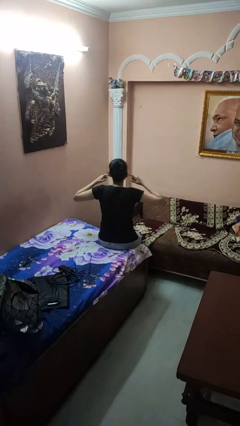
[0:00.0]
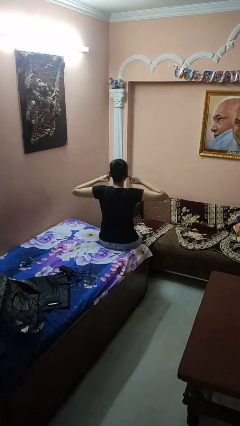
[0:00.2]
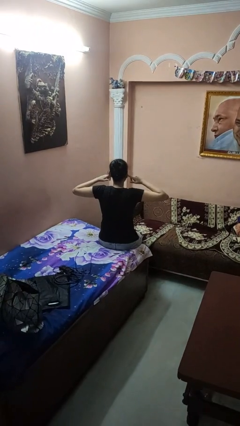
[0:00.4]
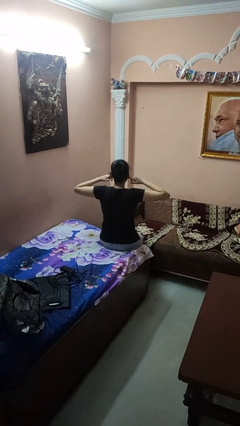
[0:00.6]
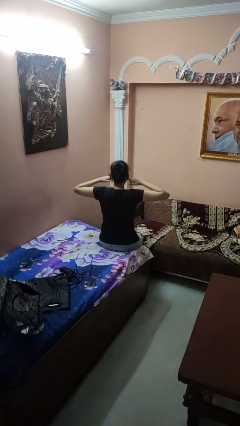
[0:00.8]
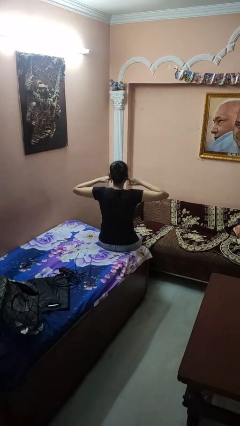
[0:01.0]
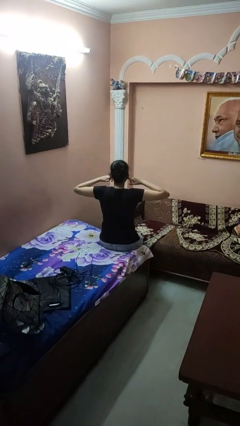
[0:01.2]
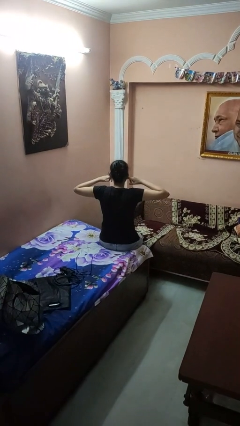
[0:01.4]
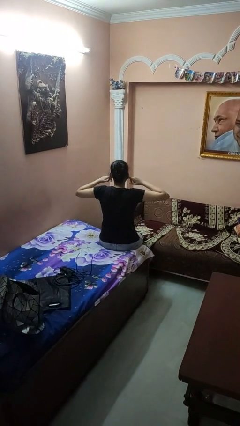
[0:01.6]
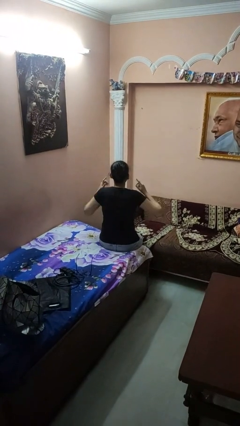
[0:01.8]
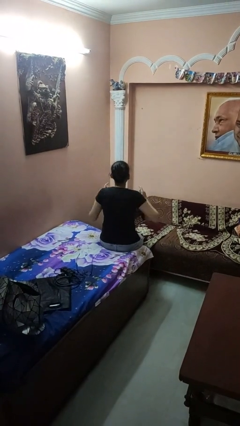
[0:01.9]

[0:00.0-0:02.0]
person puts fingers in ear

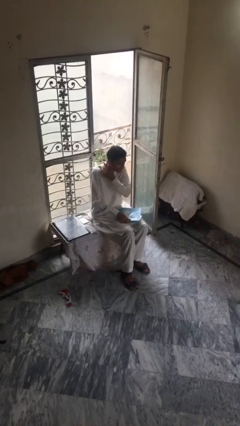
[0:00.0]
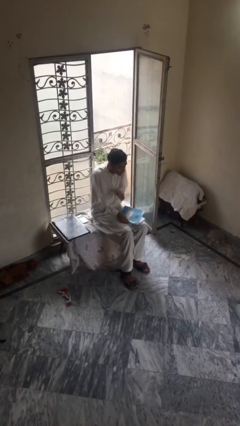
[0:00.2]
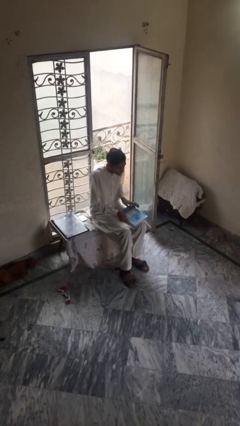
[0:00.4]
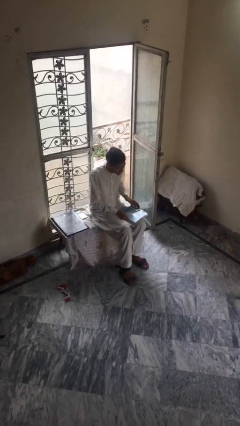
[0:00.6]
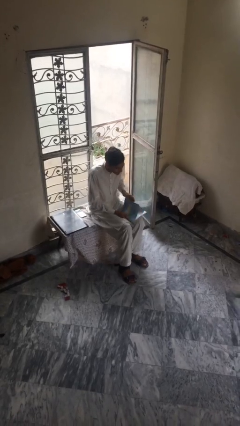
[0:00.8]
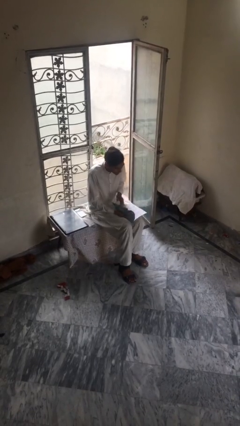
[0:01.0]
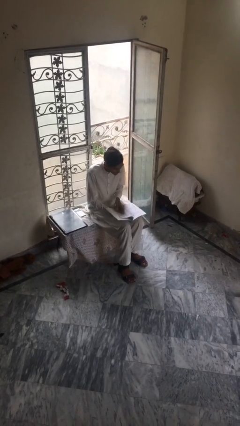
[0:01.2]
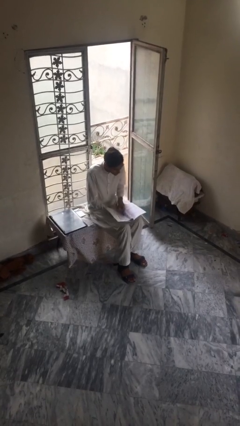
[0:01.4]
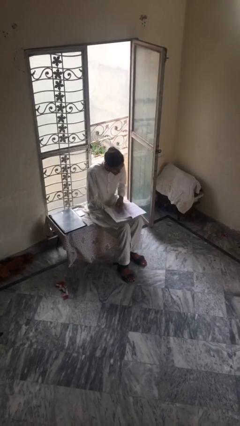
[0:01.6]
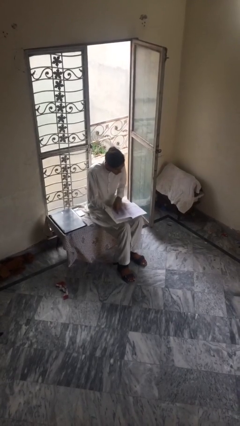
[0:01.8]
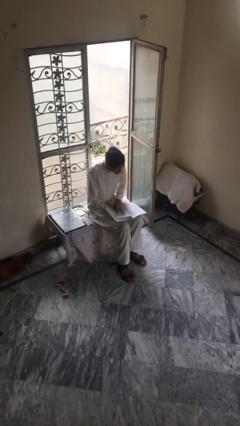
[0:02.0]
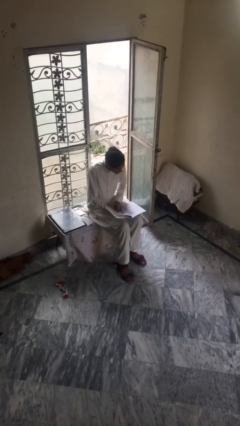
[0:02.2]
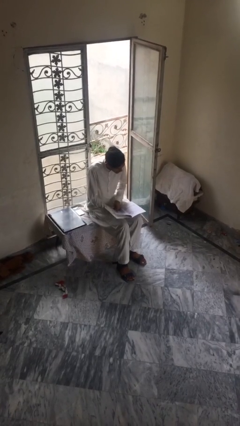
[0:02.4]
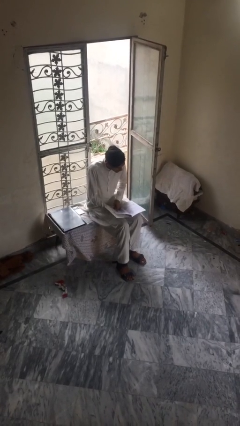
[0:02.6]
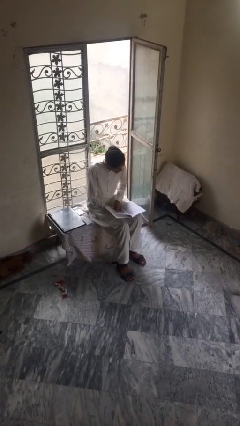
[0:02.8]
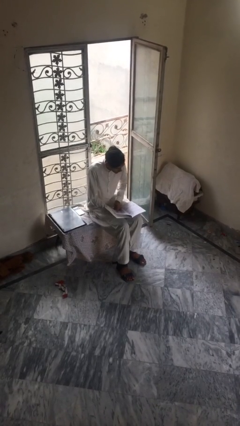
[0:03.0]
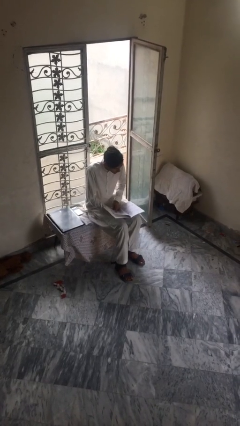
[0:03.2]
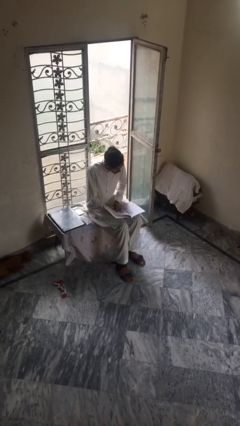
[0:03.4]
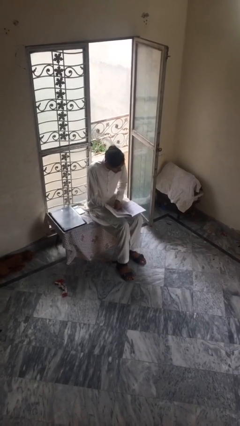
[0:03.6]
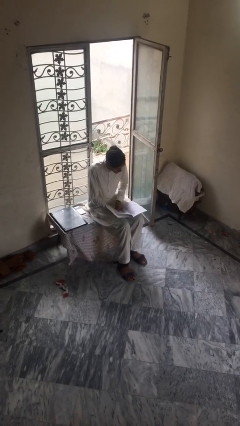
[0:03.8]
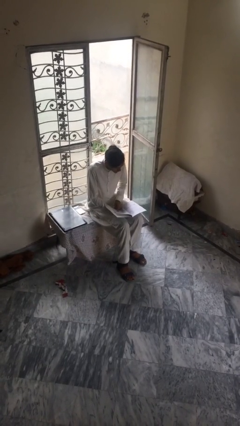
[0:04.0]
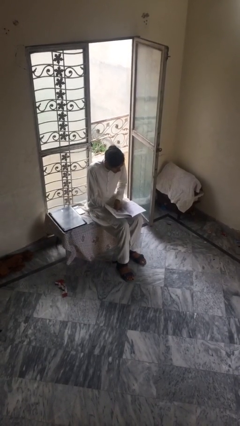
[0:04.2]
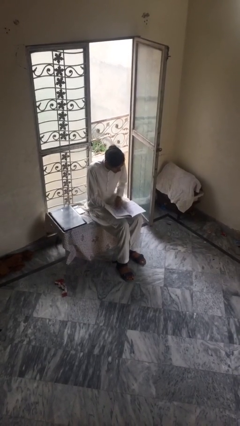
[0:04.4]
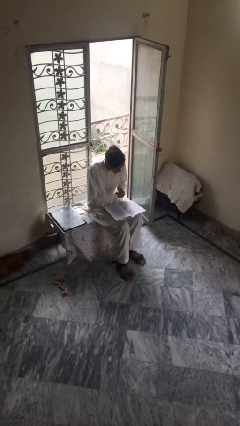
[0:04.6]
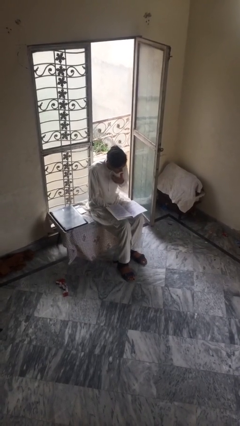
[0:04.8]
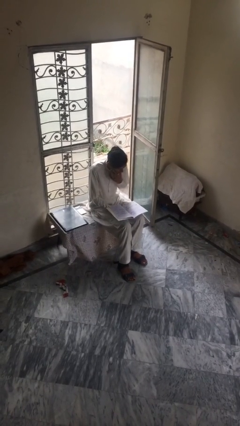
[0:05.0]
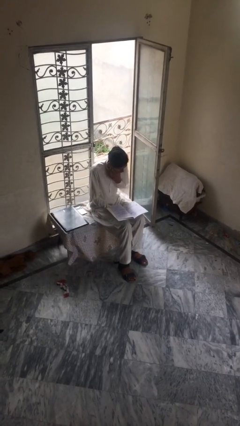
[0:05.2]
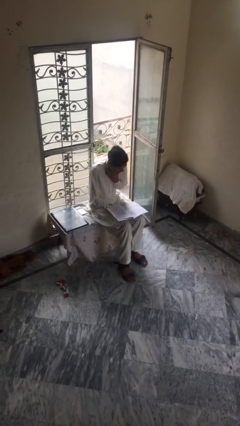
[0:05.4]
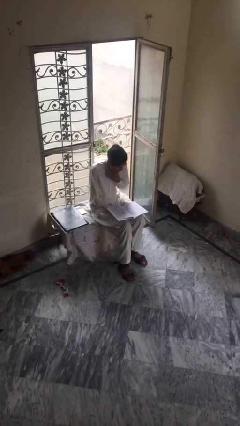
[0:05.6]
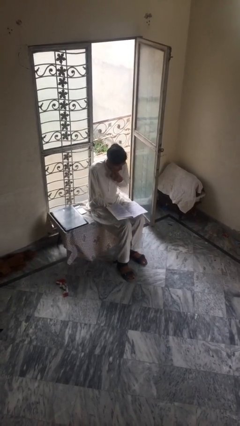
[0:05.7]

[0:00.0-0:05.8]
person reads document

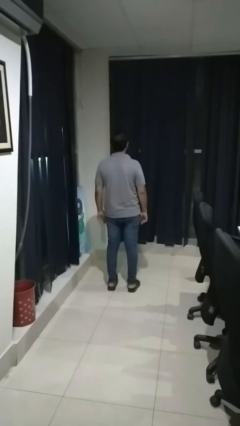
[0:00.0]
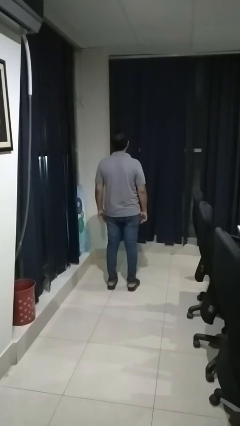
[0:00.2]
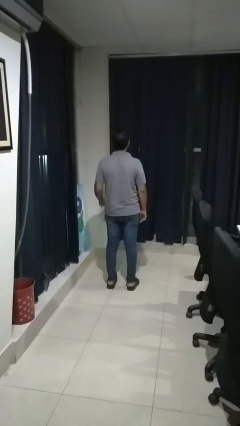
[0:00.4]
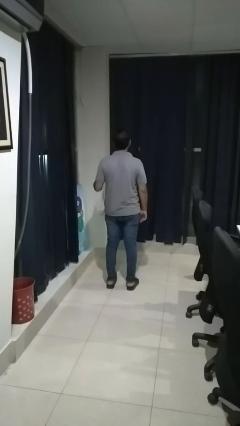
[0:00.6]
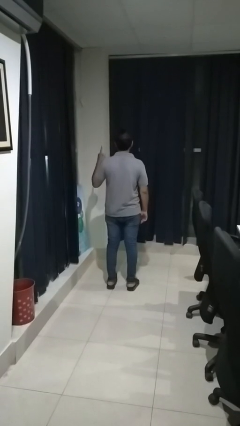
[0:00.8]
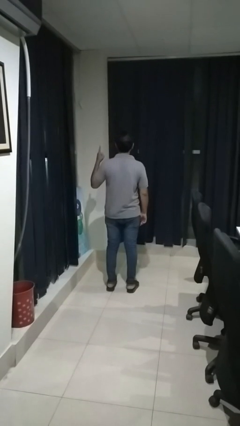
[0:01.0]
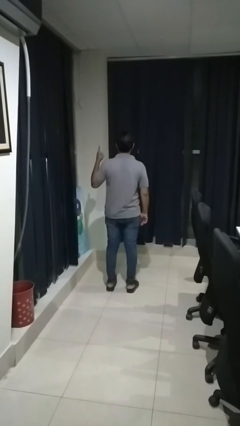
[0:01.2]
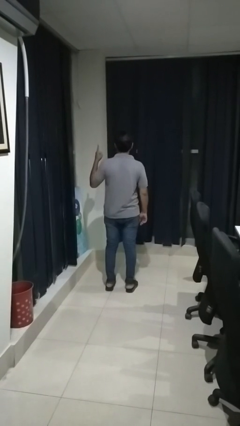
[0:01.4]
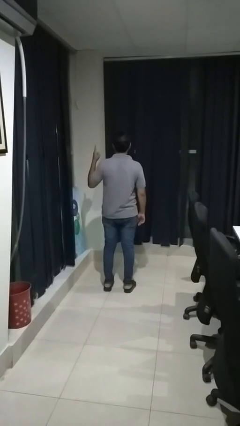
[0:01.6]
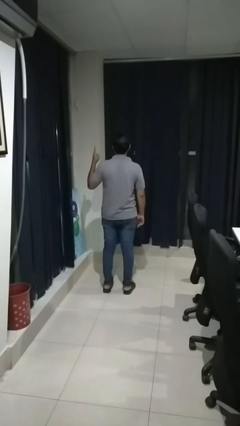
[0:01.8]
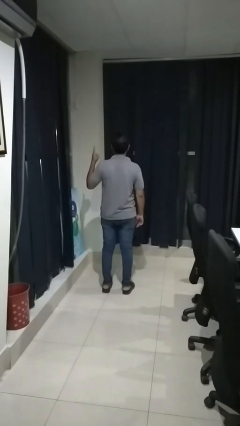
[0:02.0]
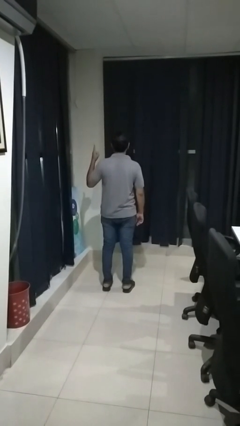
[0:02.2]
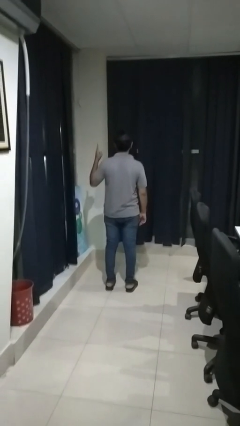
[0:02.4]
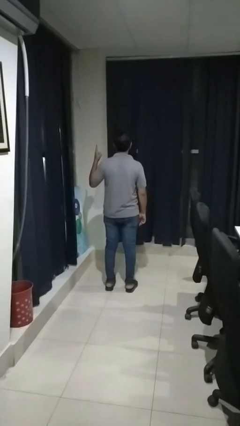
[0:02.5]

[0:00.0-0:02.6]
person gestures number one

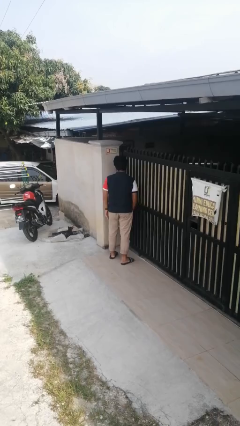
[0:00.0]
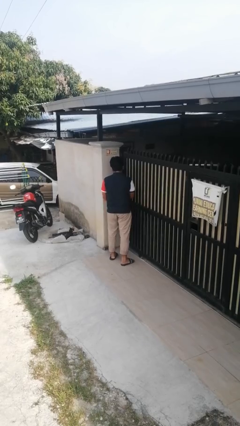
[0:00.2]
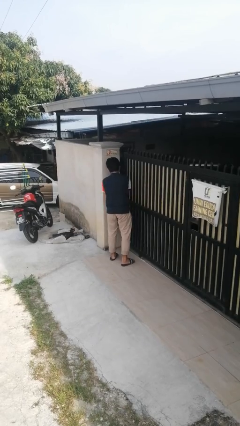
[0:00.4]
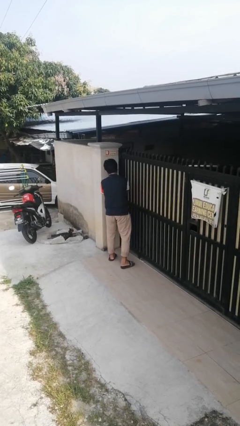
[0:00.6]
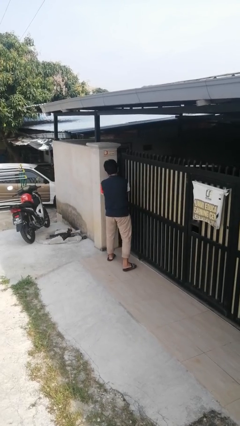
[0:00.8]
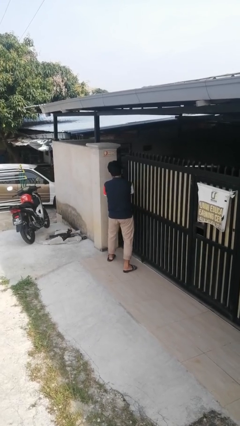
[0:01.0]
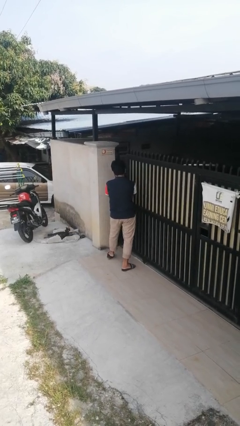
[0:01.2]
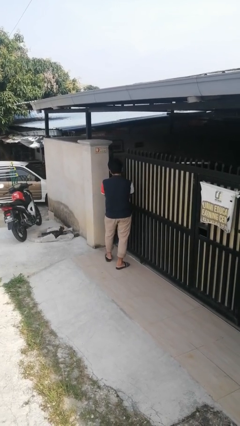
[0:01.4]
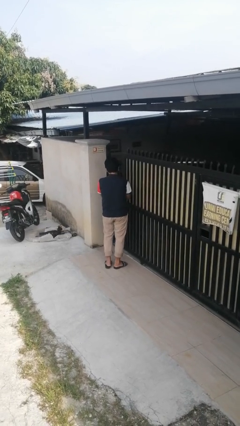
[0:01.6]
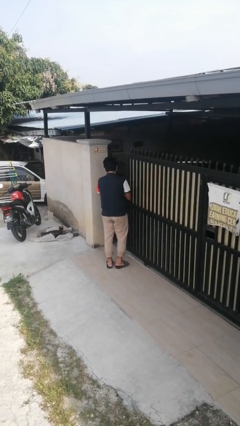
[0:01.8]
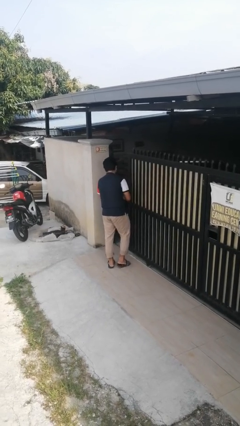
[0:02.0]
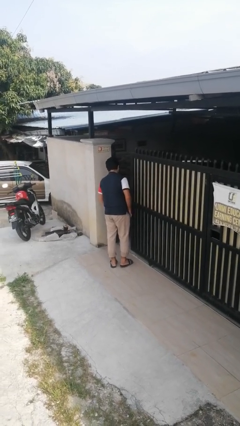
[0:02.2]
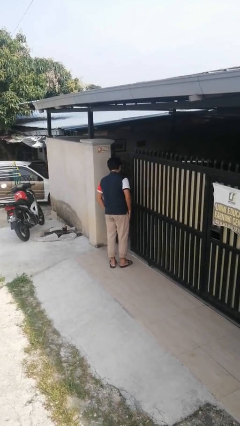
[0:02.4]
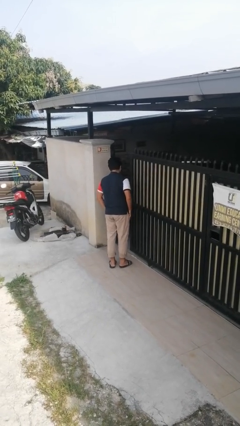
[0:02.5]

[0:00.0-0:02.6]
person opens sliding door

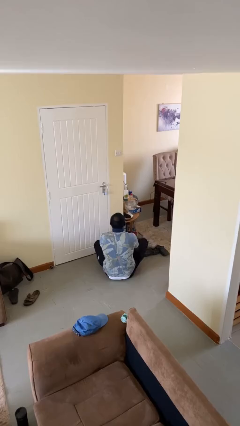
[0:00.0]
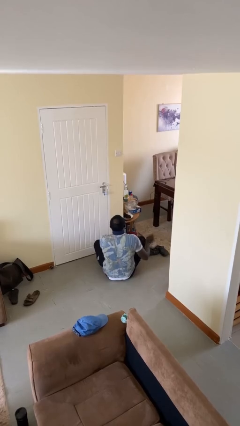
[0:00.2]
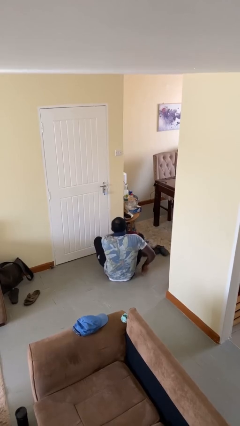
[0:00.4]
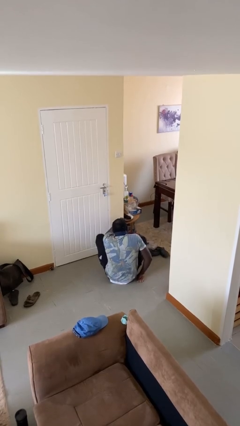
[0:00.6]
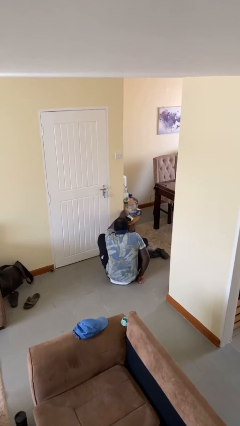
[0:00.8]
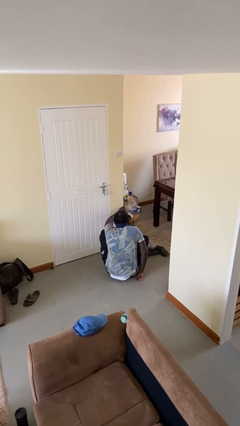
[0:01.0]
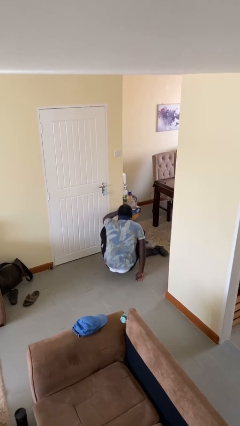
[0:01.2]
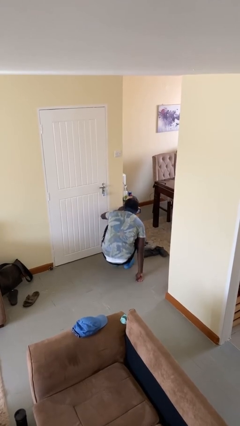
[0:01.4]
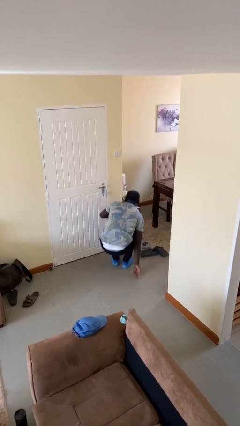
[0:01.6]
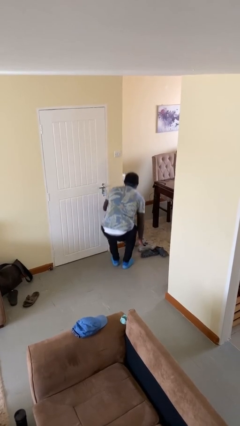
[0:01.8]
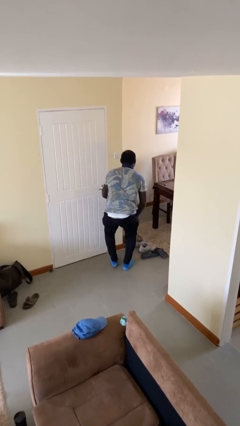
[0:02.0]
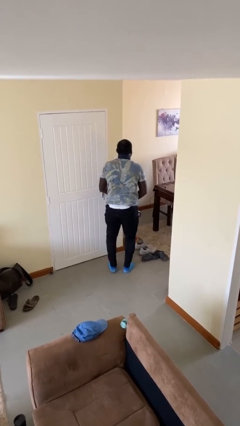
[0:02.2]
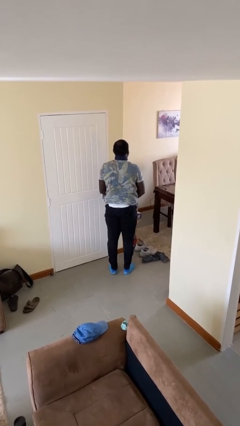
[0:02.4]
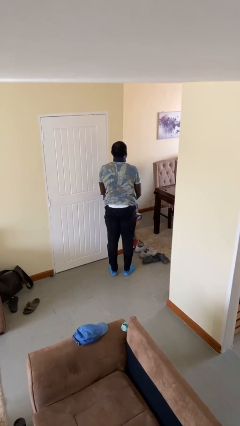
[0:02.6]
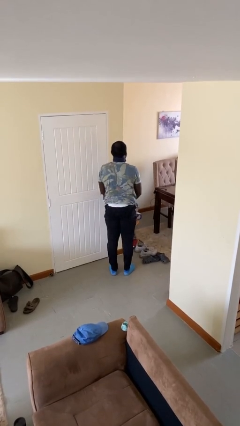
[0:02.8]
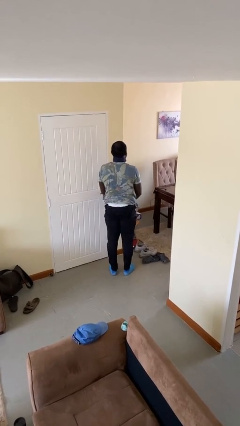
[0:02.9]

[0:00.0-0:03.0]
person stands up from floor

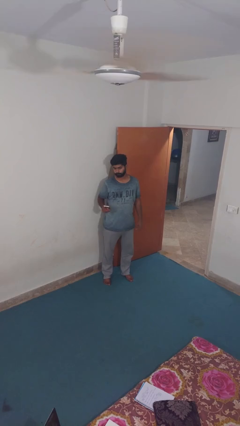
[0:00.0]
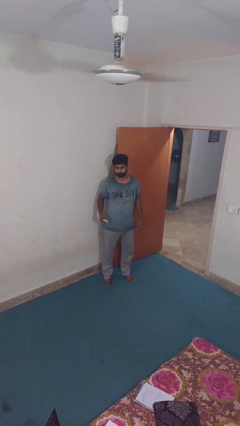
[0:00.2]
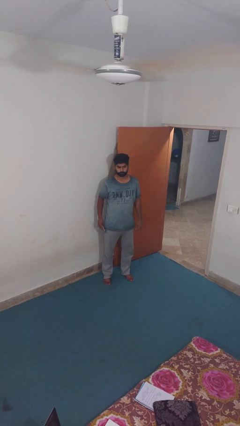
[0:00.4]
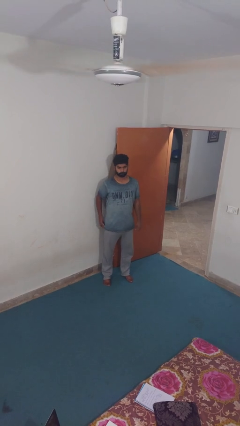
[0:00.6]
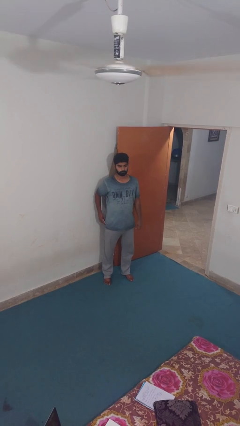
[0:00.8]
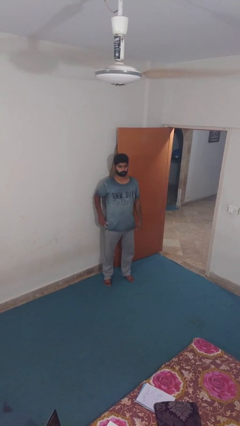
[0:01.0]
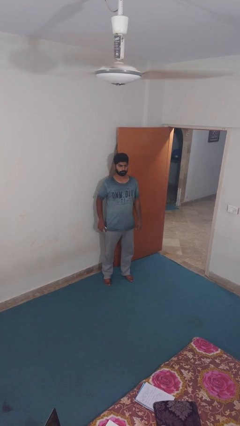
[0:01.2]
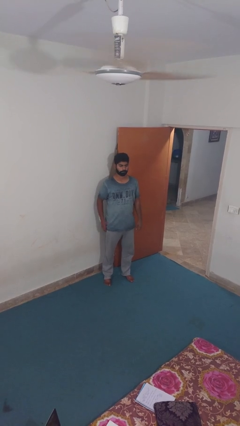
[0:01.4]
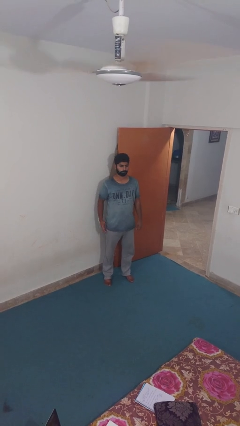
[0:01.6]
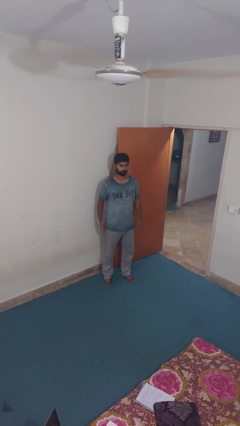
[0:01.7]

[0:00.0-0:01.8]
person puts phone into pocket
